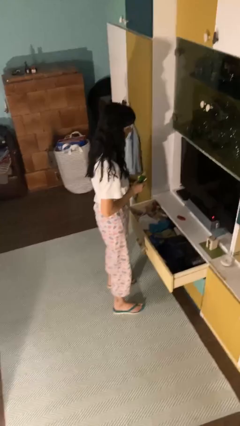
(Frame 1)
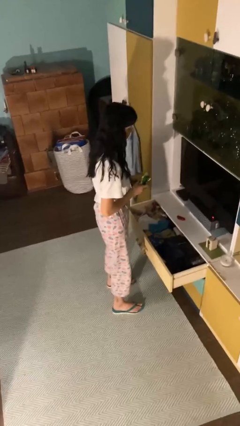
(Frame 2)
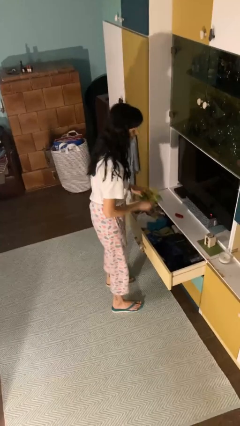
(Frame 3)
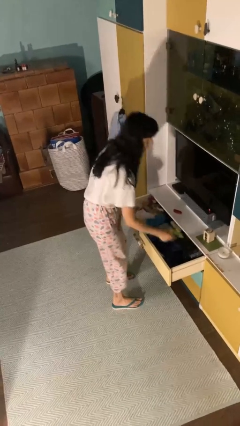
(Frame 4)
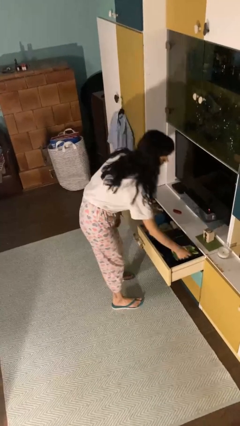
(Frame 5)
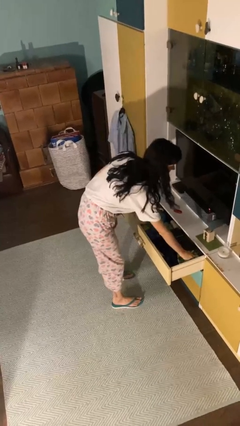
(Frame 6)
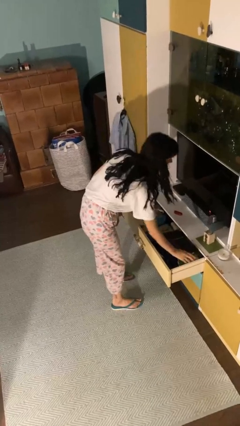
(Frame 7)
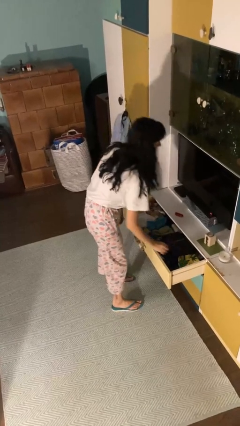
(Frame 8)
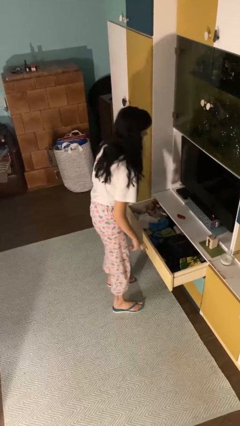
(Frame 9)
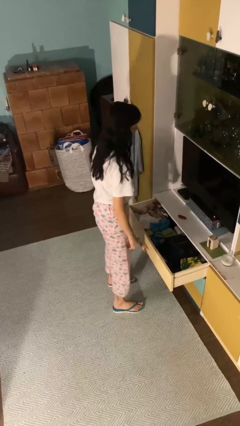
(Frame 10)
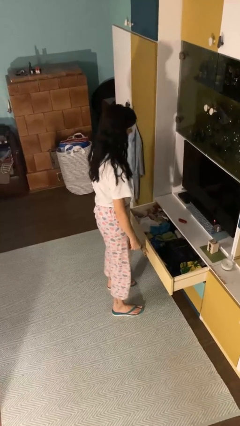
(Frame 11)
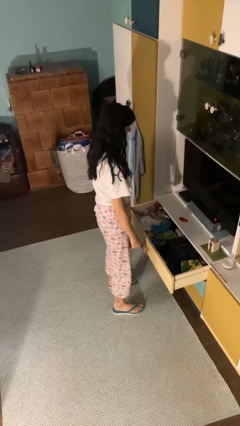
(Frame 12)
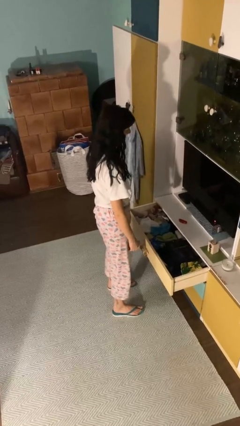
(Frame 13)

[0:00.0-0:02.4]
person puts clothes into dresser

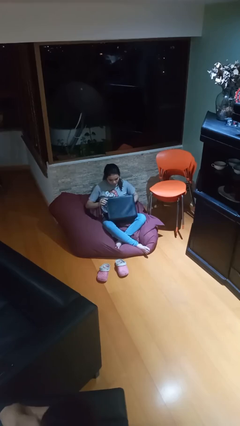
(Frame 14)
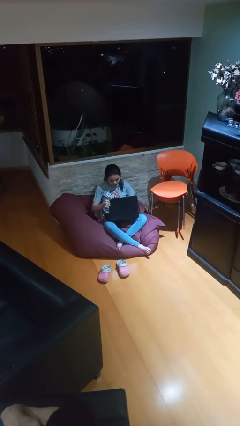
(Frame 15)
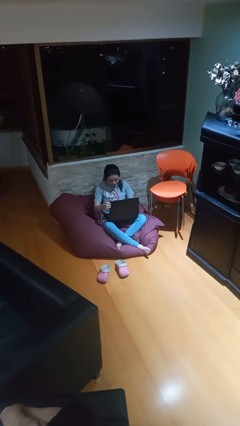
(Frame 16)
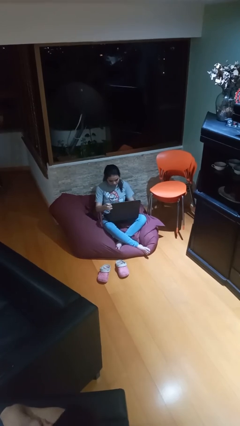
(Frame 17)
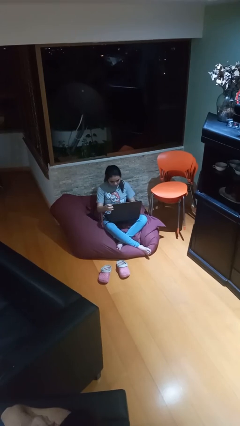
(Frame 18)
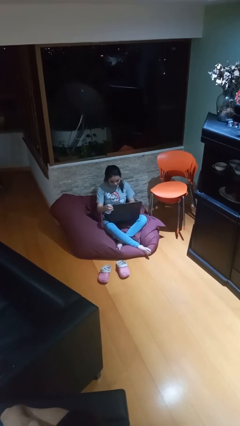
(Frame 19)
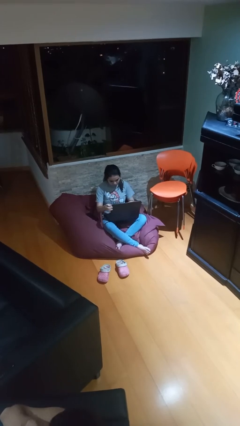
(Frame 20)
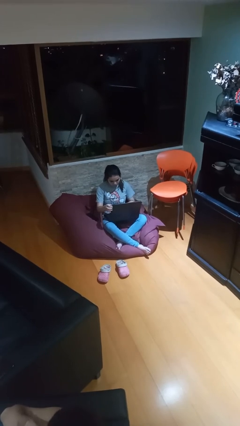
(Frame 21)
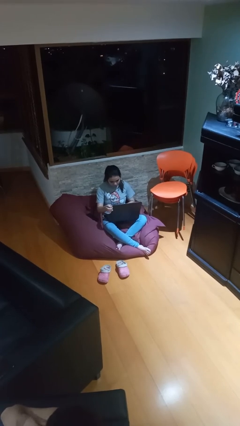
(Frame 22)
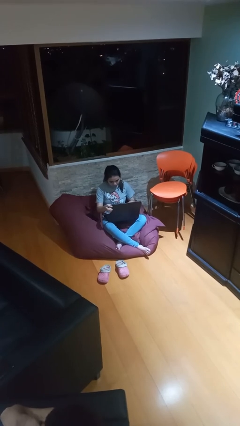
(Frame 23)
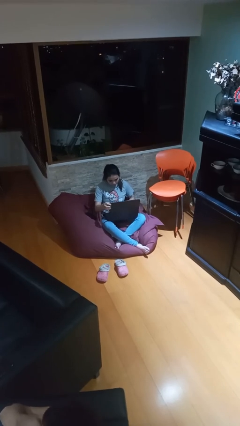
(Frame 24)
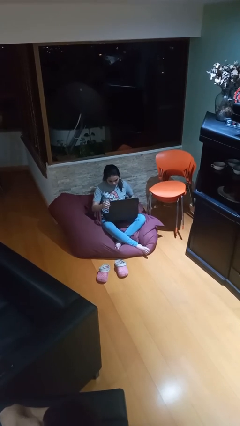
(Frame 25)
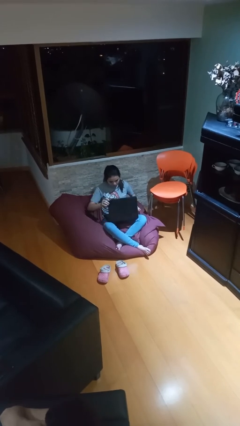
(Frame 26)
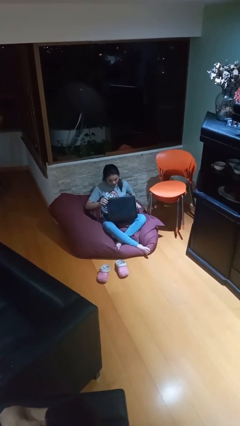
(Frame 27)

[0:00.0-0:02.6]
person interacts with laptop

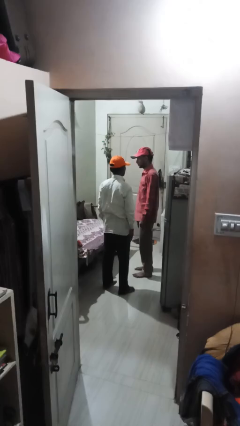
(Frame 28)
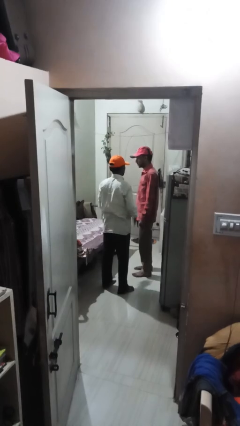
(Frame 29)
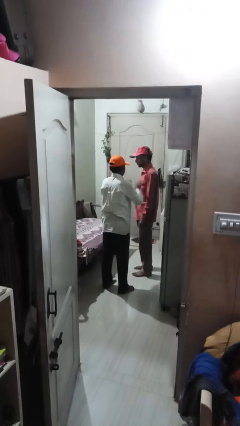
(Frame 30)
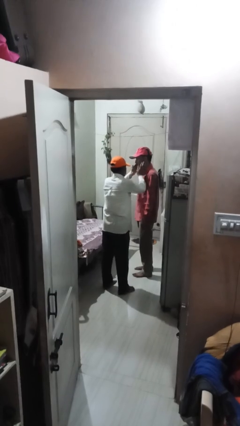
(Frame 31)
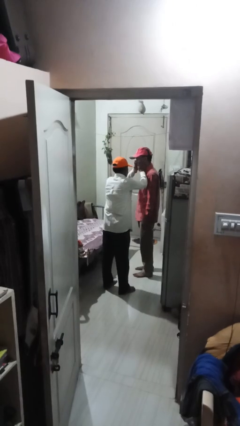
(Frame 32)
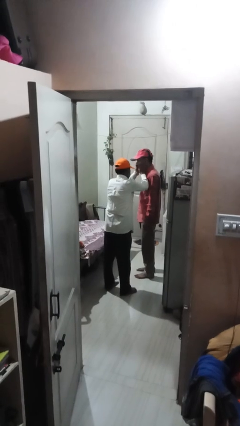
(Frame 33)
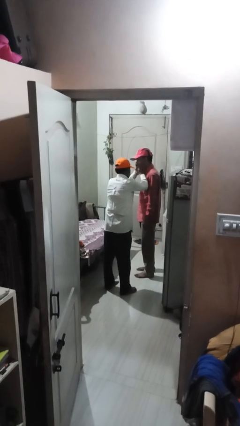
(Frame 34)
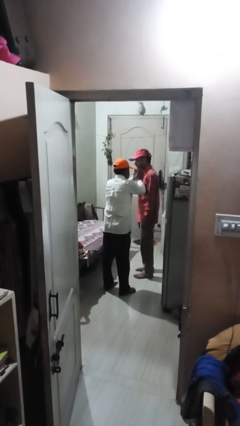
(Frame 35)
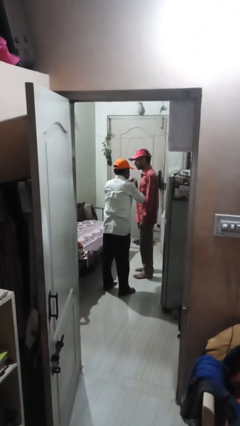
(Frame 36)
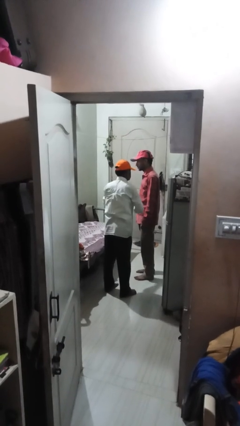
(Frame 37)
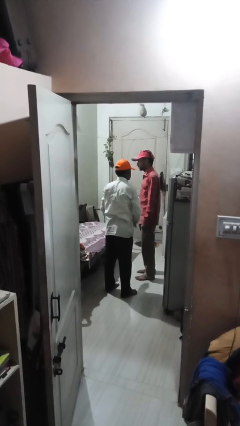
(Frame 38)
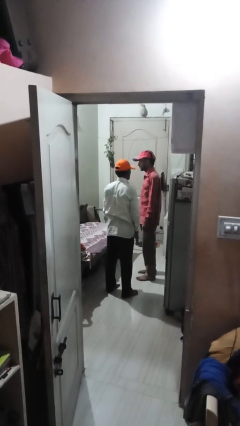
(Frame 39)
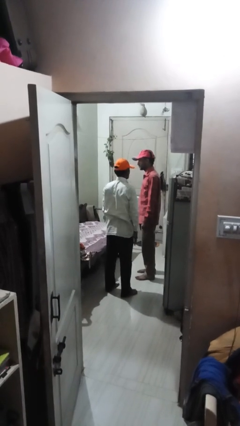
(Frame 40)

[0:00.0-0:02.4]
person touches face of person

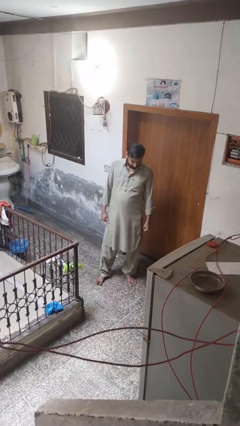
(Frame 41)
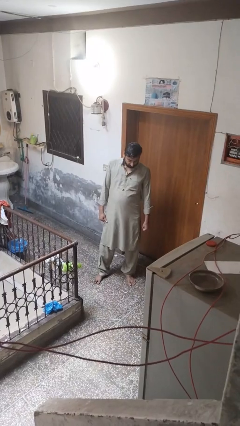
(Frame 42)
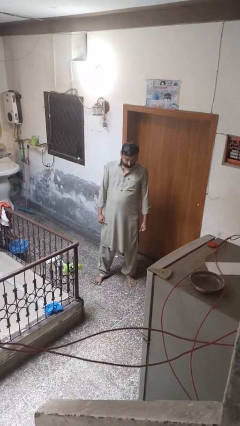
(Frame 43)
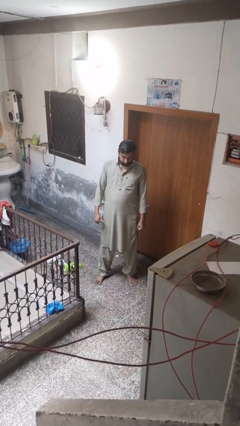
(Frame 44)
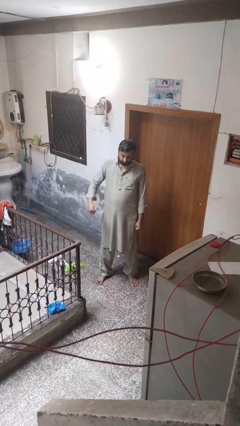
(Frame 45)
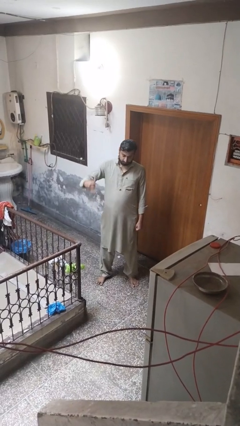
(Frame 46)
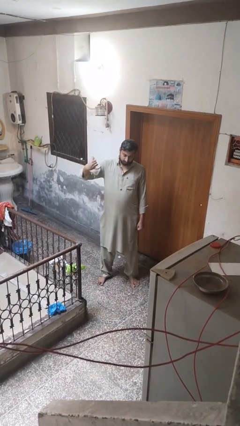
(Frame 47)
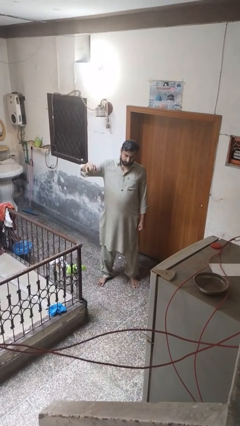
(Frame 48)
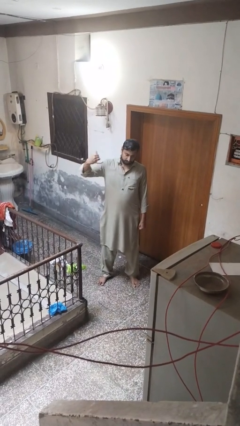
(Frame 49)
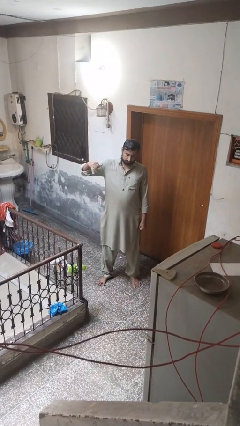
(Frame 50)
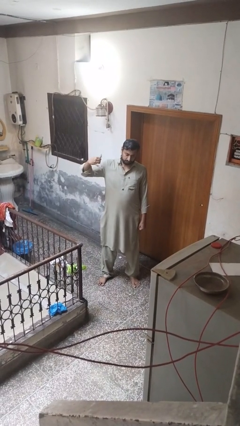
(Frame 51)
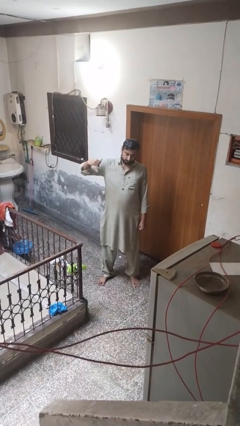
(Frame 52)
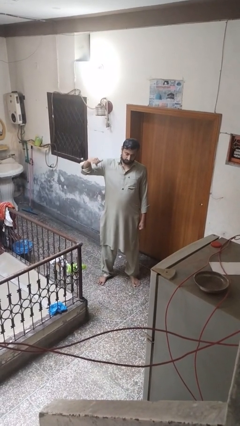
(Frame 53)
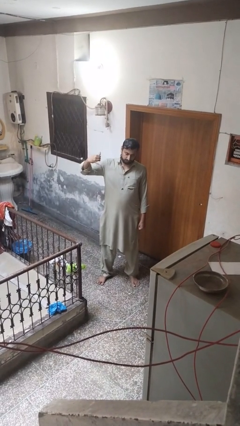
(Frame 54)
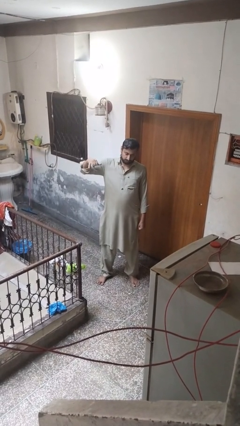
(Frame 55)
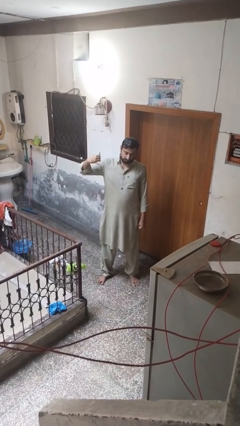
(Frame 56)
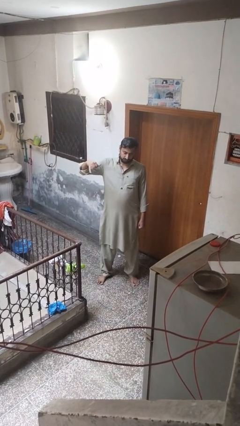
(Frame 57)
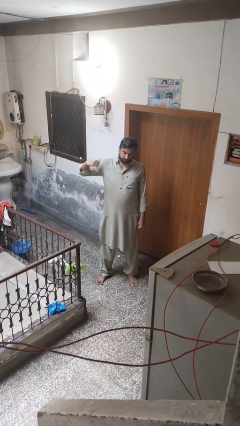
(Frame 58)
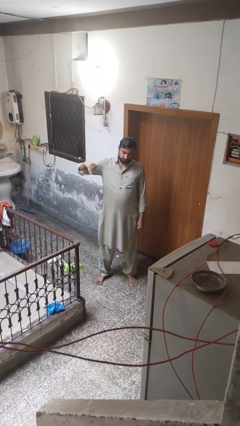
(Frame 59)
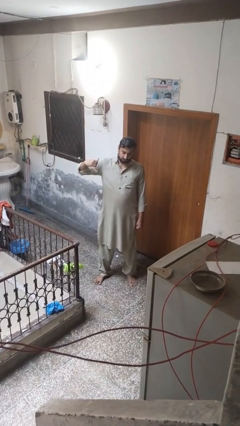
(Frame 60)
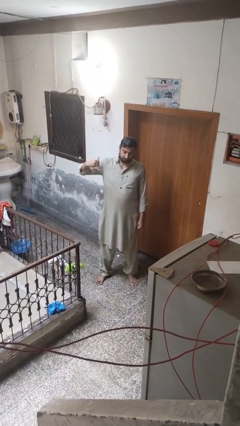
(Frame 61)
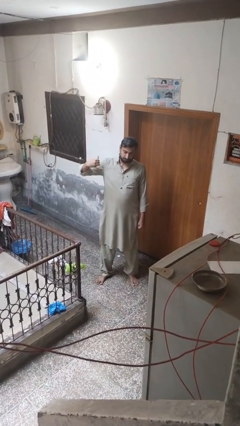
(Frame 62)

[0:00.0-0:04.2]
person gestures hang loose

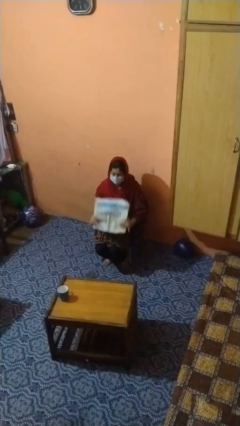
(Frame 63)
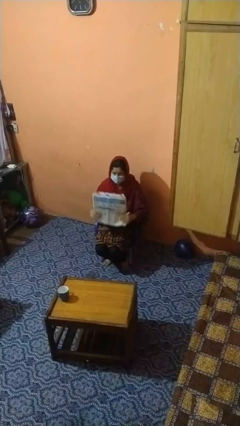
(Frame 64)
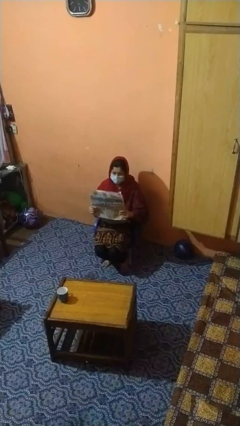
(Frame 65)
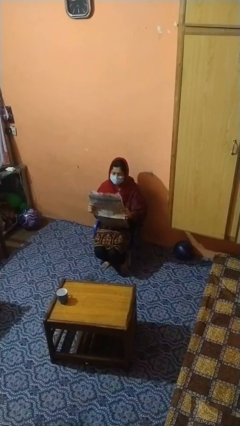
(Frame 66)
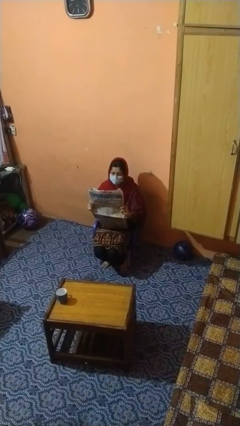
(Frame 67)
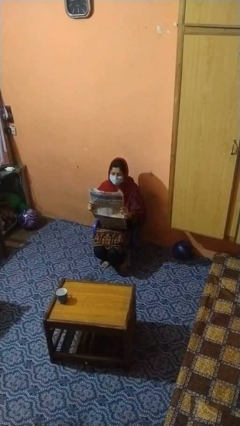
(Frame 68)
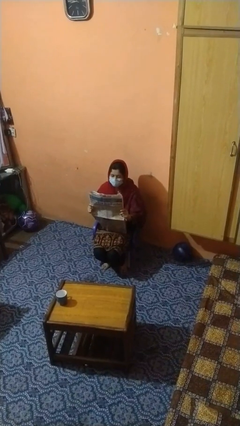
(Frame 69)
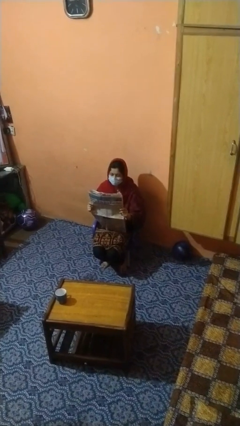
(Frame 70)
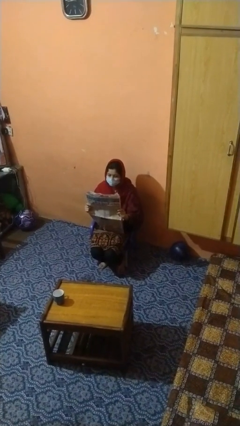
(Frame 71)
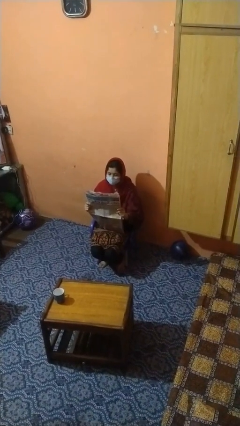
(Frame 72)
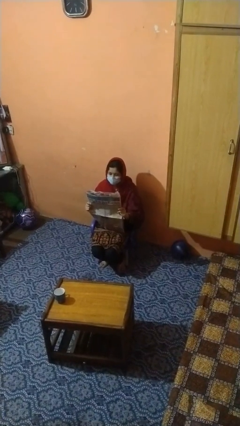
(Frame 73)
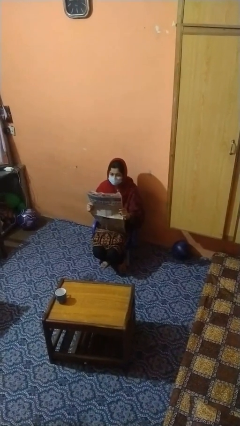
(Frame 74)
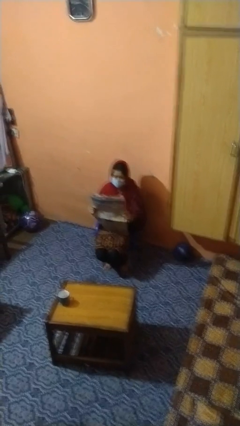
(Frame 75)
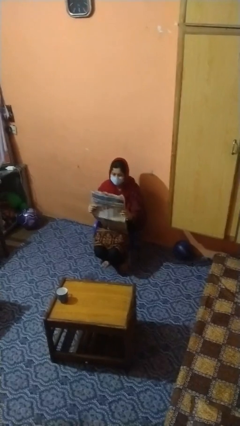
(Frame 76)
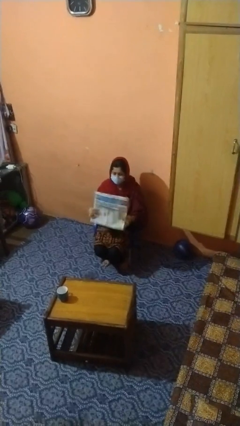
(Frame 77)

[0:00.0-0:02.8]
person reads newspaper

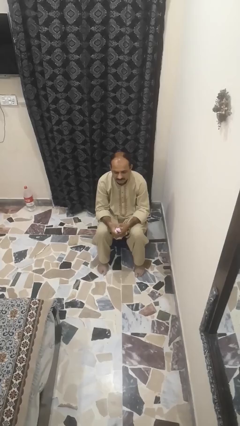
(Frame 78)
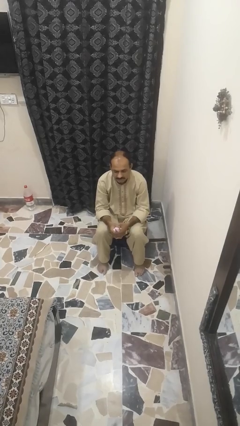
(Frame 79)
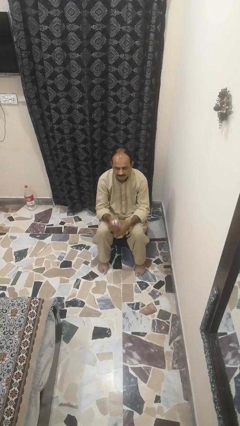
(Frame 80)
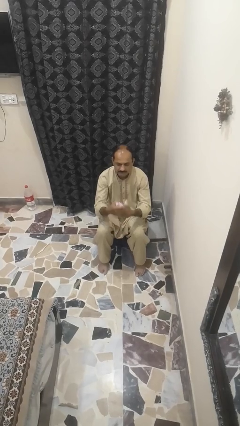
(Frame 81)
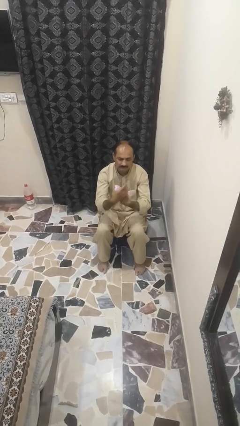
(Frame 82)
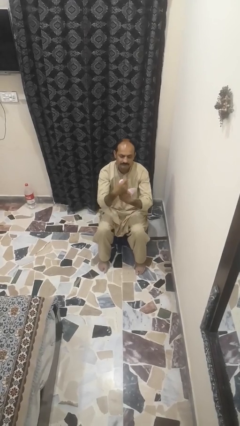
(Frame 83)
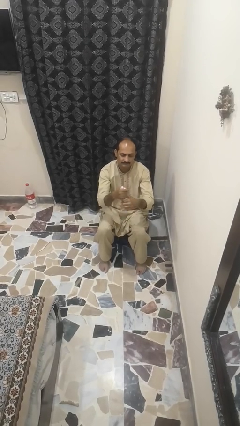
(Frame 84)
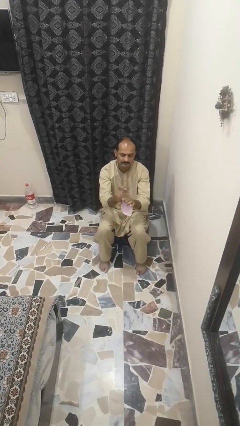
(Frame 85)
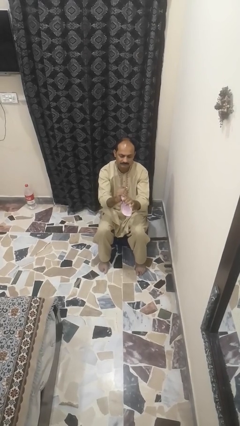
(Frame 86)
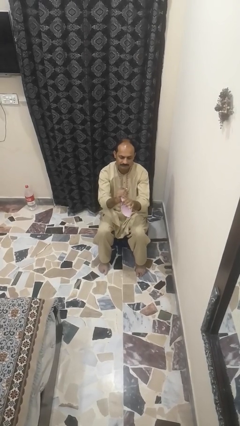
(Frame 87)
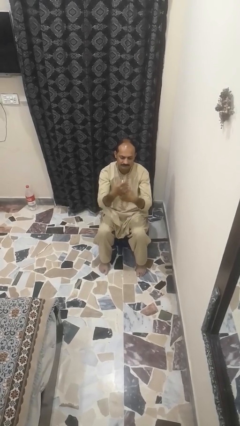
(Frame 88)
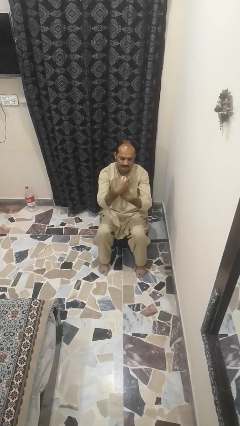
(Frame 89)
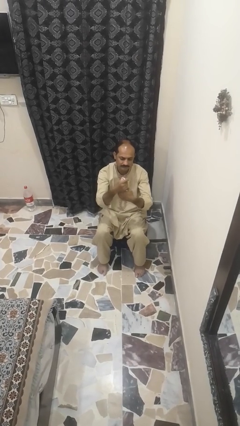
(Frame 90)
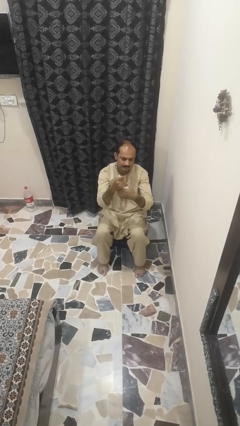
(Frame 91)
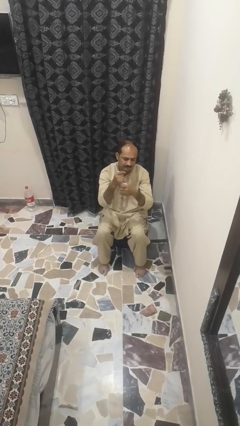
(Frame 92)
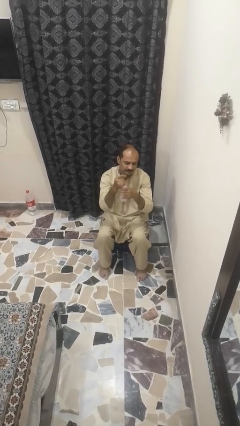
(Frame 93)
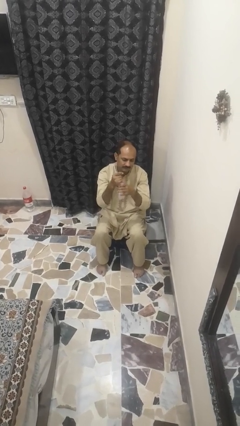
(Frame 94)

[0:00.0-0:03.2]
person squeezes object

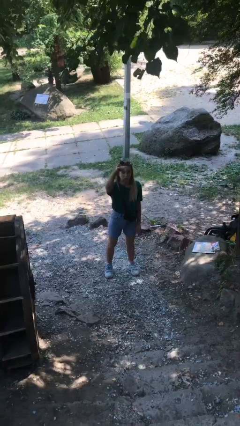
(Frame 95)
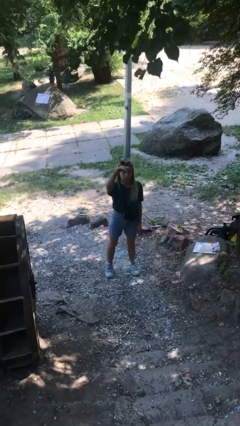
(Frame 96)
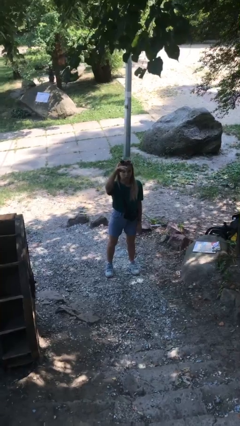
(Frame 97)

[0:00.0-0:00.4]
person gestures swipe up
